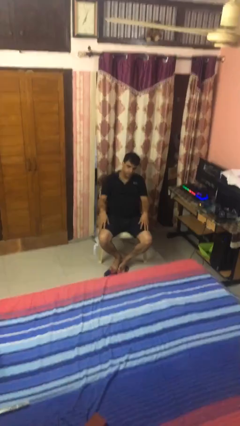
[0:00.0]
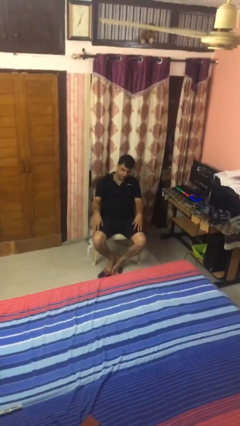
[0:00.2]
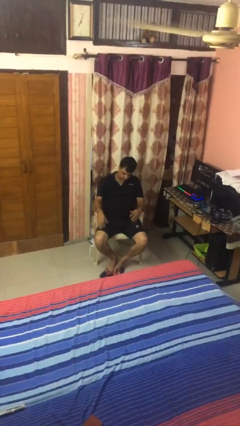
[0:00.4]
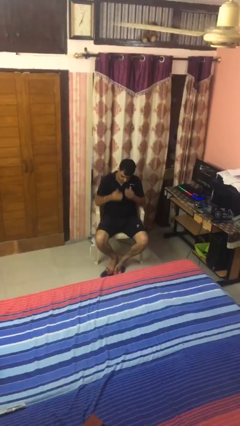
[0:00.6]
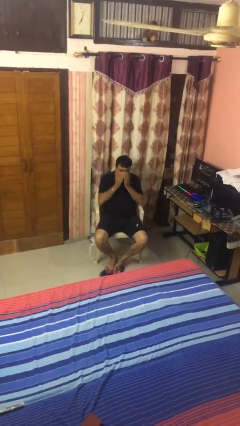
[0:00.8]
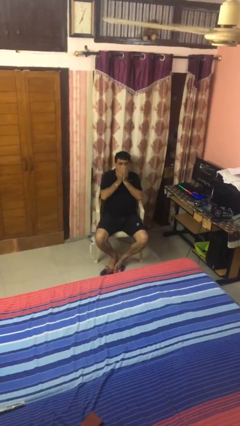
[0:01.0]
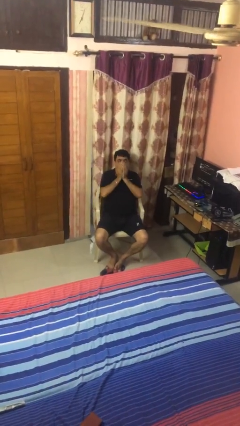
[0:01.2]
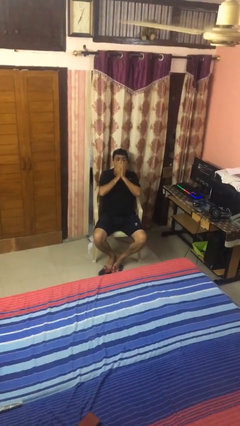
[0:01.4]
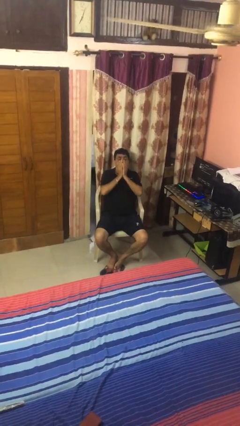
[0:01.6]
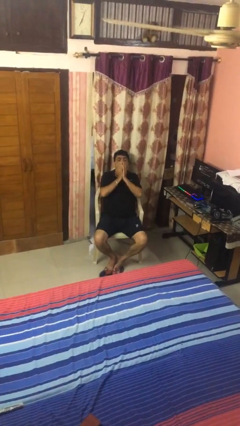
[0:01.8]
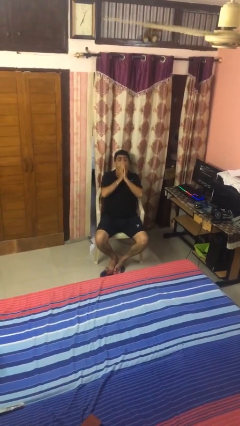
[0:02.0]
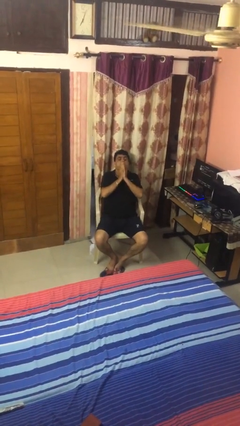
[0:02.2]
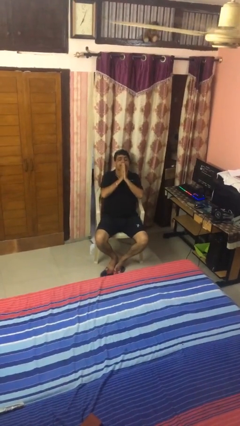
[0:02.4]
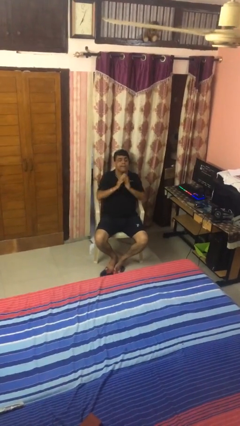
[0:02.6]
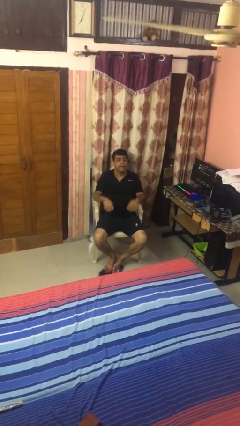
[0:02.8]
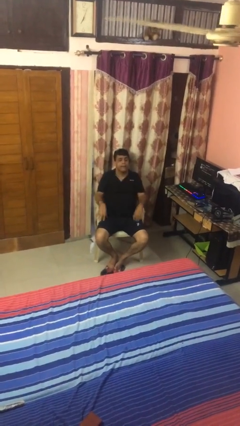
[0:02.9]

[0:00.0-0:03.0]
person covers face with hands

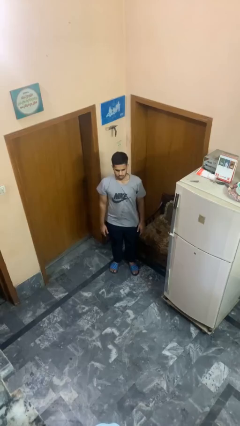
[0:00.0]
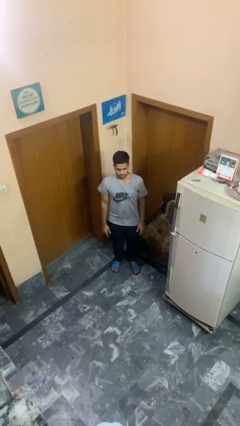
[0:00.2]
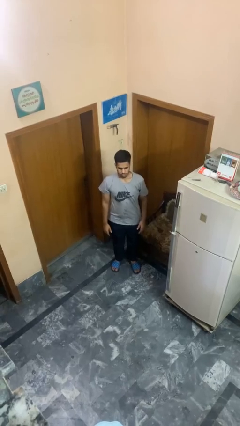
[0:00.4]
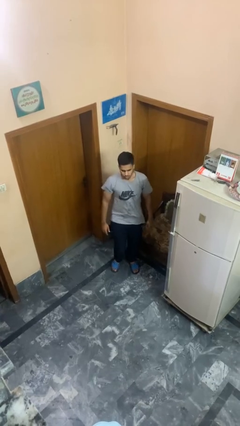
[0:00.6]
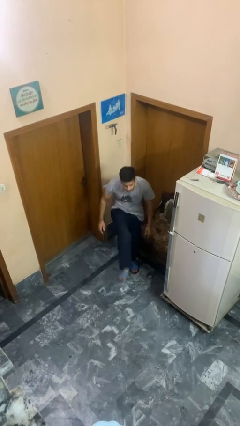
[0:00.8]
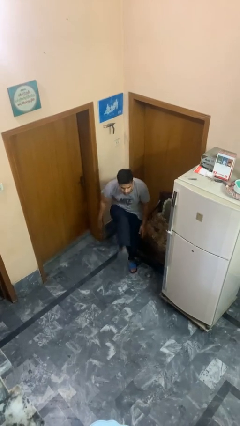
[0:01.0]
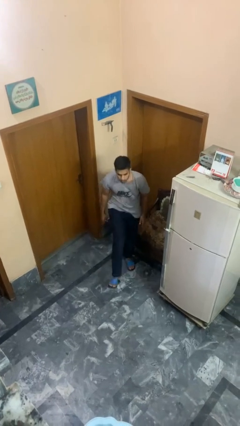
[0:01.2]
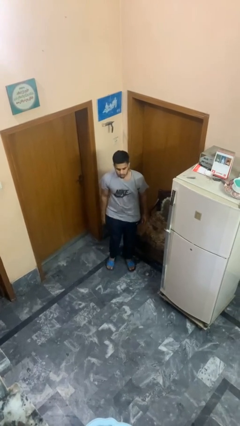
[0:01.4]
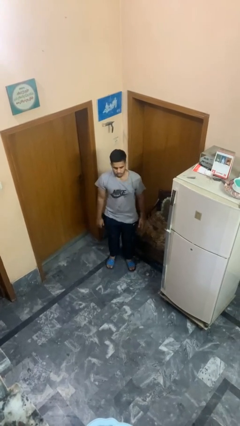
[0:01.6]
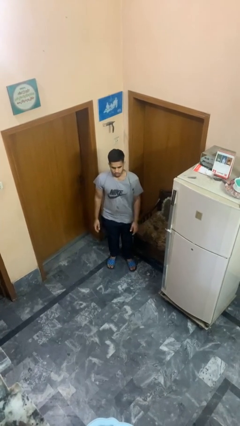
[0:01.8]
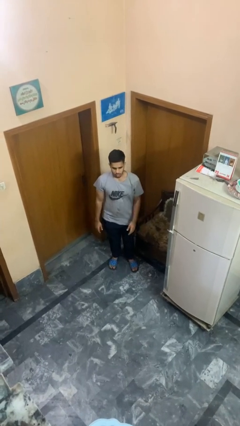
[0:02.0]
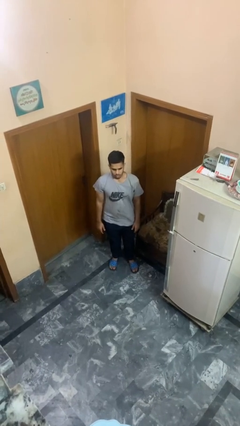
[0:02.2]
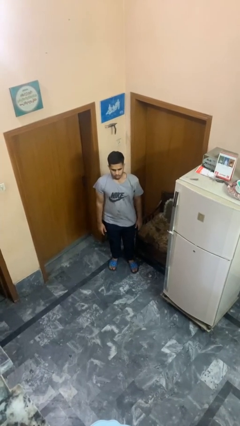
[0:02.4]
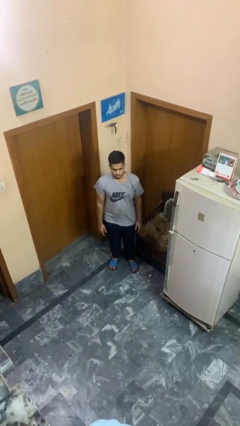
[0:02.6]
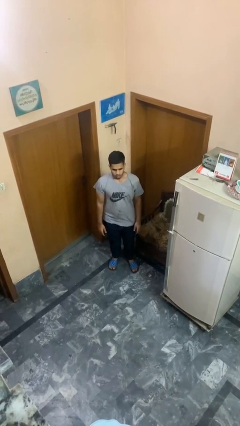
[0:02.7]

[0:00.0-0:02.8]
person karate kicks

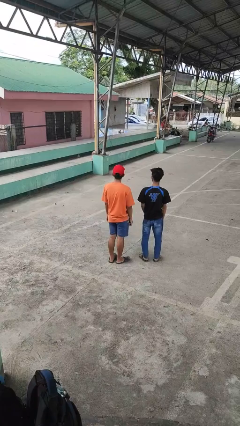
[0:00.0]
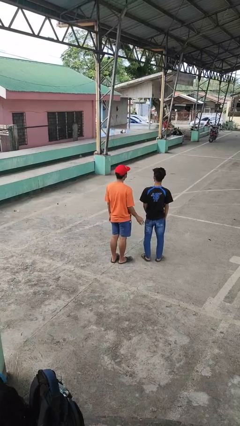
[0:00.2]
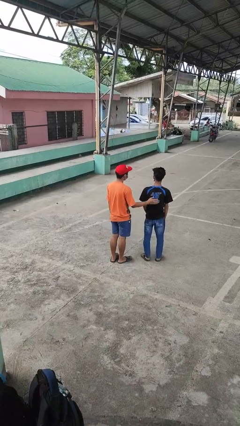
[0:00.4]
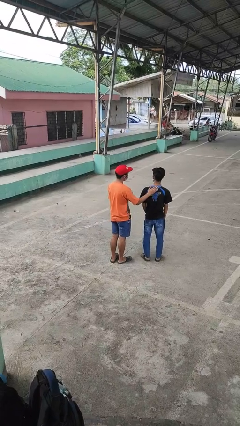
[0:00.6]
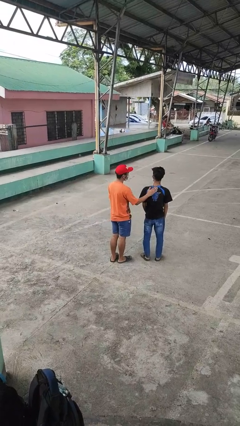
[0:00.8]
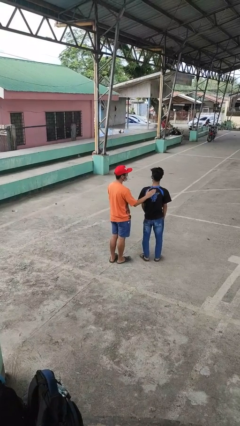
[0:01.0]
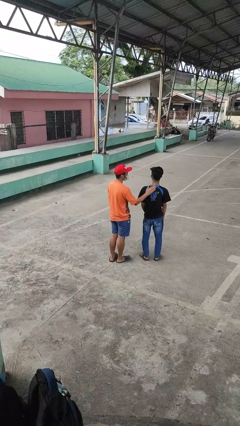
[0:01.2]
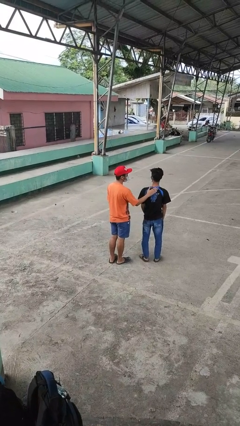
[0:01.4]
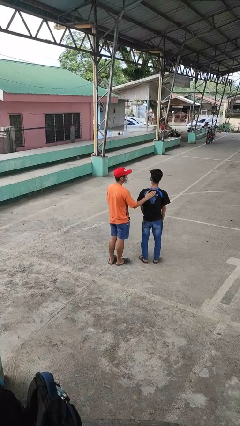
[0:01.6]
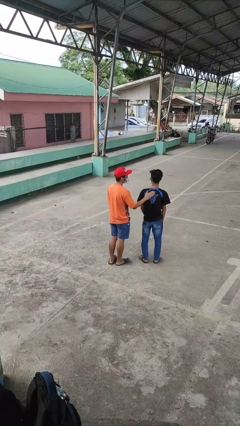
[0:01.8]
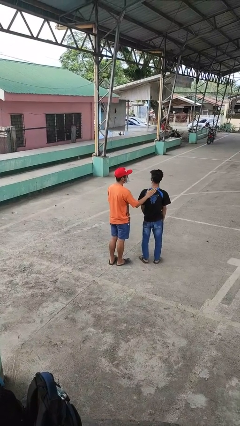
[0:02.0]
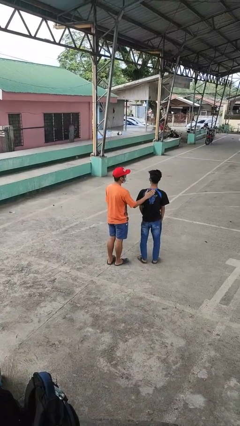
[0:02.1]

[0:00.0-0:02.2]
person touches back of person

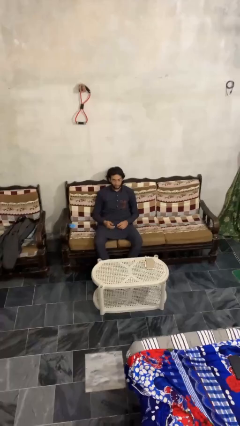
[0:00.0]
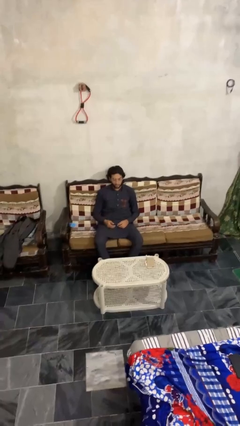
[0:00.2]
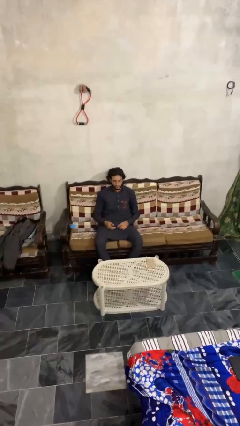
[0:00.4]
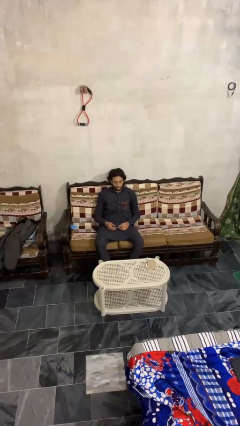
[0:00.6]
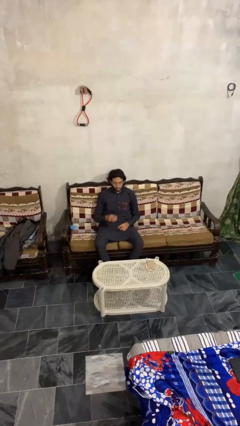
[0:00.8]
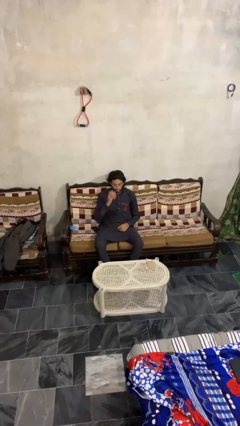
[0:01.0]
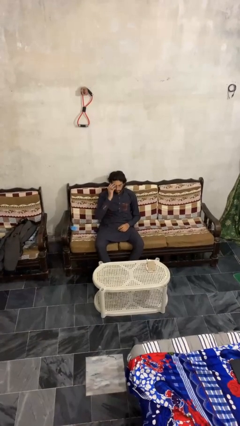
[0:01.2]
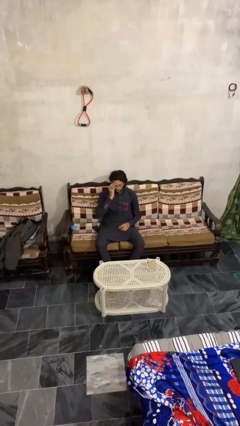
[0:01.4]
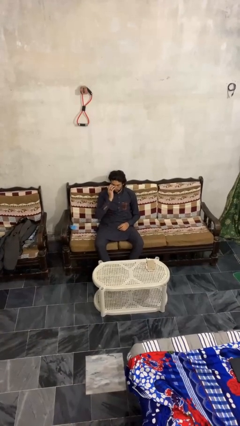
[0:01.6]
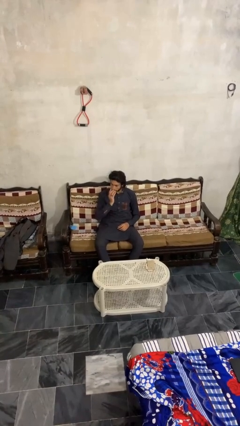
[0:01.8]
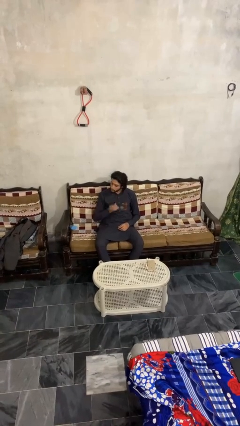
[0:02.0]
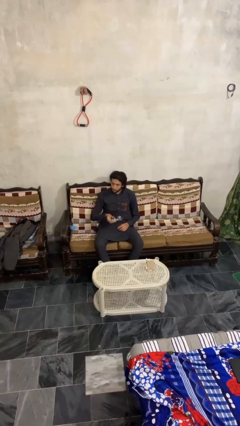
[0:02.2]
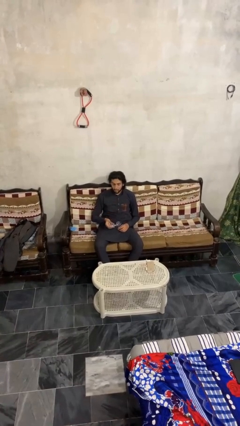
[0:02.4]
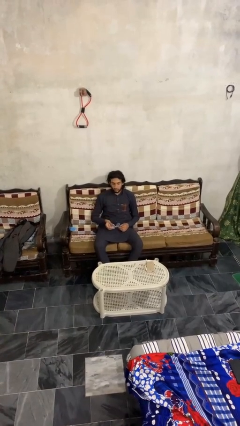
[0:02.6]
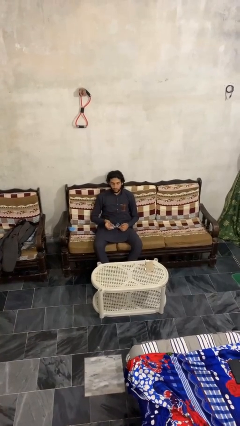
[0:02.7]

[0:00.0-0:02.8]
person takes off glasses

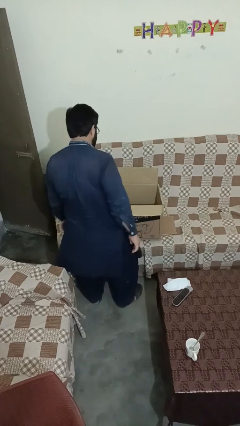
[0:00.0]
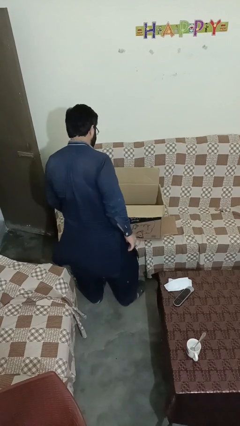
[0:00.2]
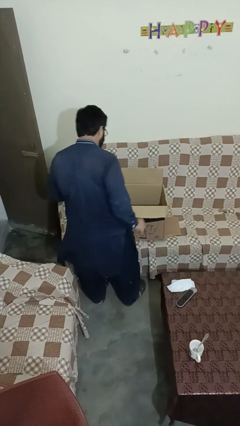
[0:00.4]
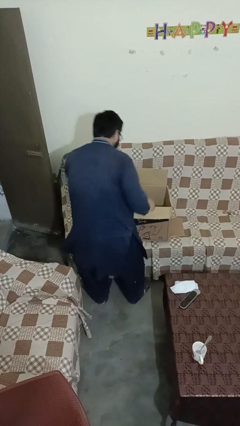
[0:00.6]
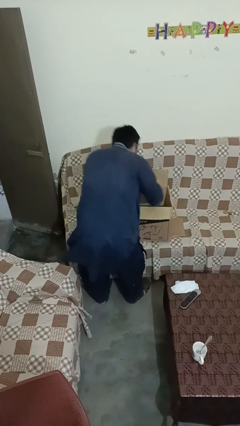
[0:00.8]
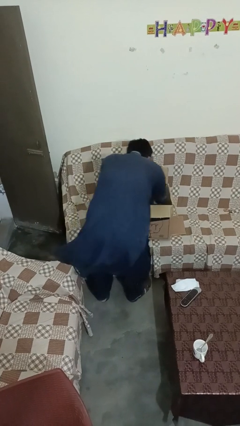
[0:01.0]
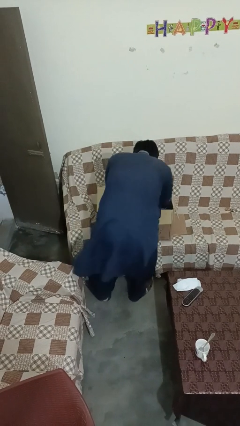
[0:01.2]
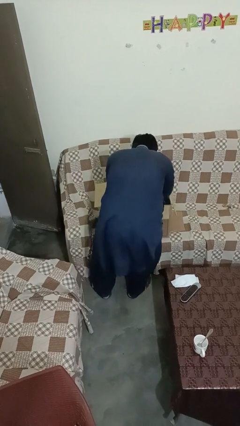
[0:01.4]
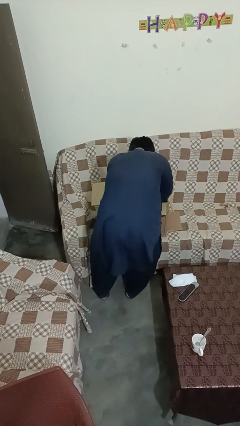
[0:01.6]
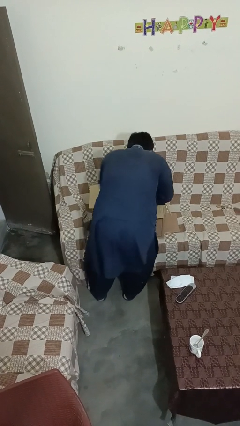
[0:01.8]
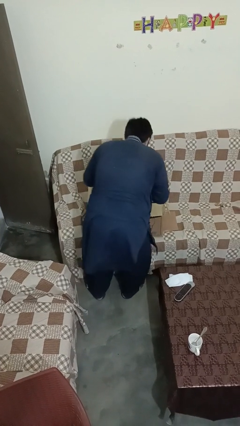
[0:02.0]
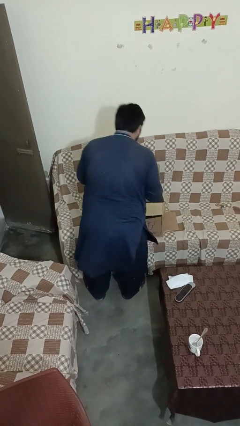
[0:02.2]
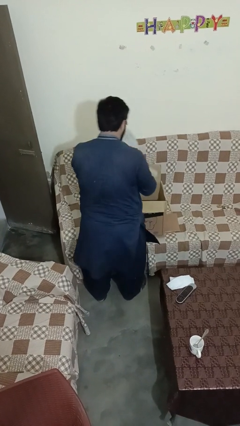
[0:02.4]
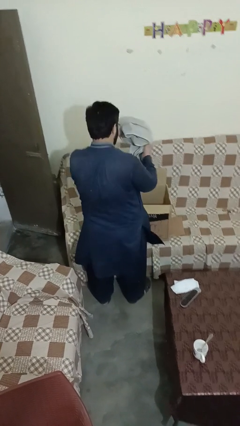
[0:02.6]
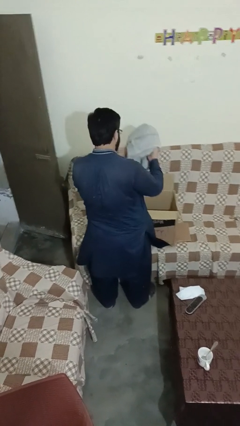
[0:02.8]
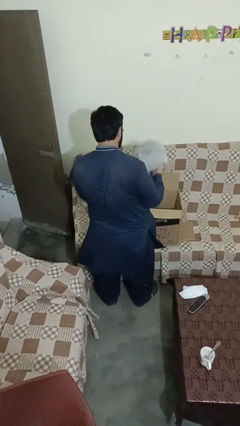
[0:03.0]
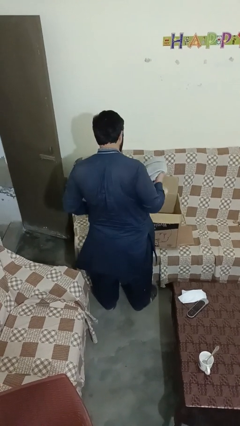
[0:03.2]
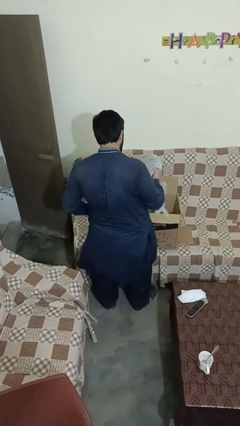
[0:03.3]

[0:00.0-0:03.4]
person searches in box

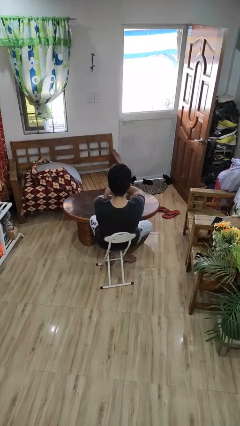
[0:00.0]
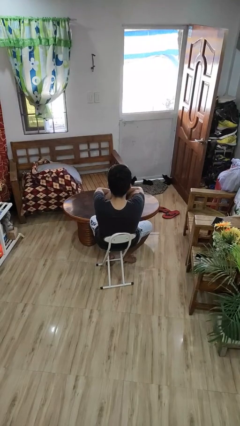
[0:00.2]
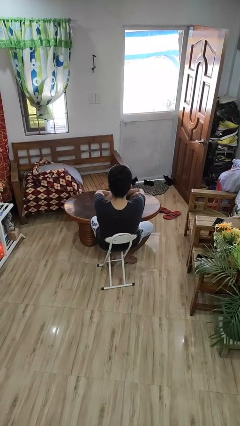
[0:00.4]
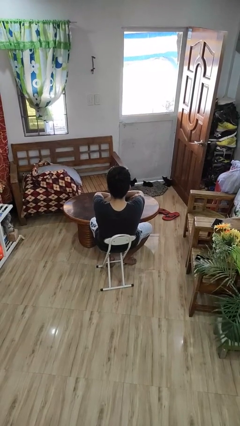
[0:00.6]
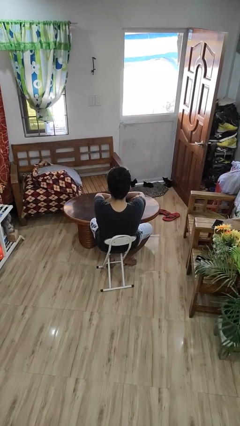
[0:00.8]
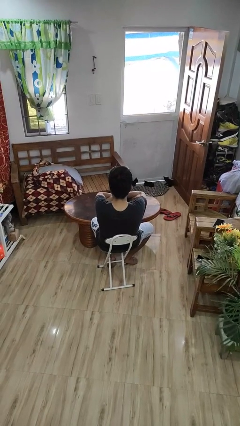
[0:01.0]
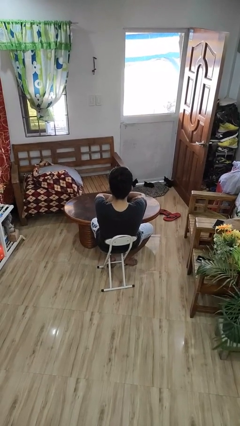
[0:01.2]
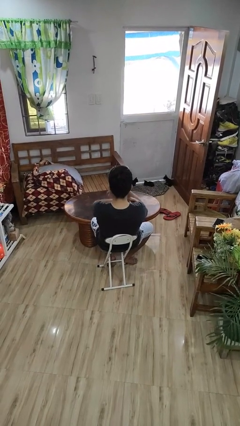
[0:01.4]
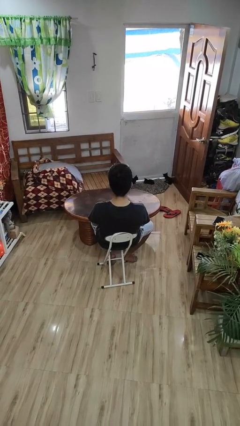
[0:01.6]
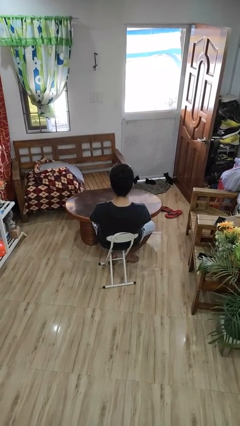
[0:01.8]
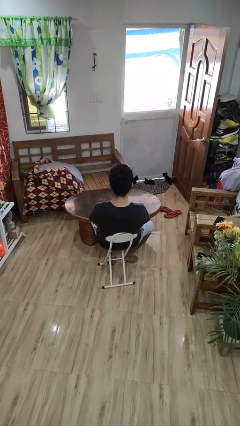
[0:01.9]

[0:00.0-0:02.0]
person crosses arms

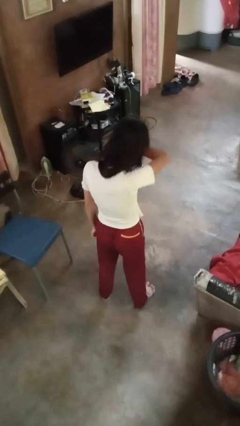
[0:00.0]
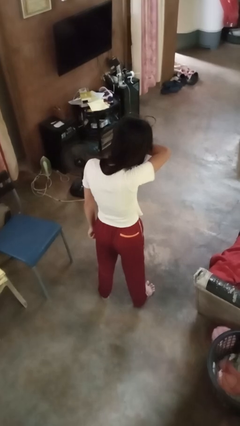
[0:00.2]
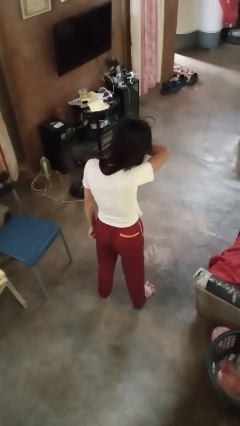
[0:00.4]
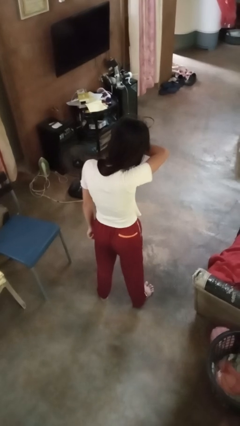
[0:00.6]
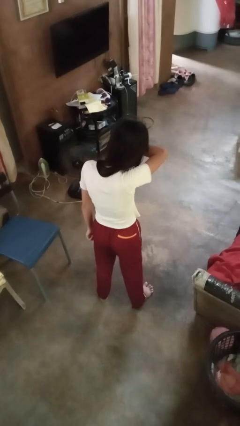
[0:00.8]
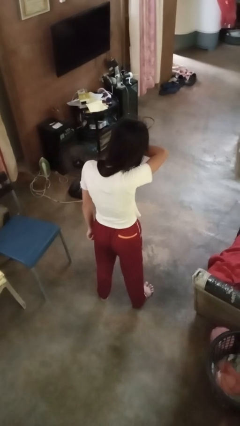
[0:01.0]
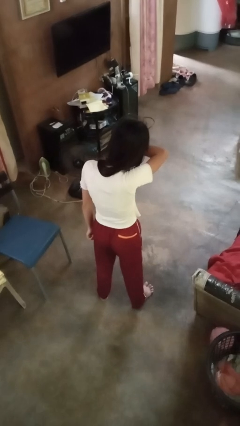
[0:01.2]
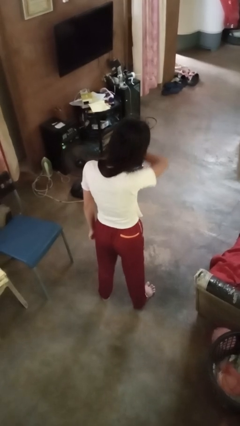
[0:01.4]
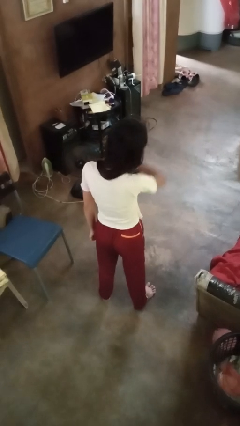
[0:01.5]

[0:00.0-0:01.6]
person sneezes into arm
